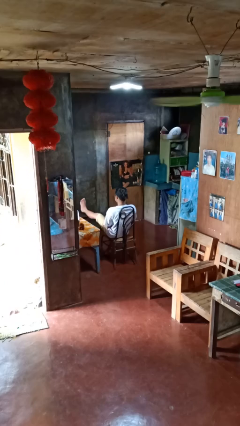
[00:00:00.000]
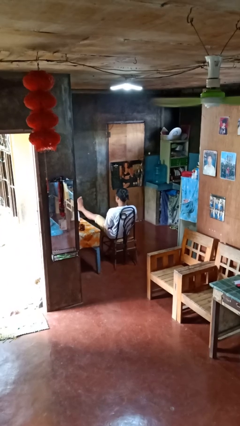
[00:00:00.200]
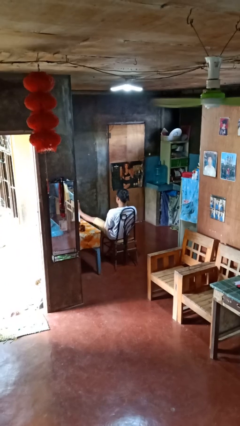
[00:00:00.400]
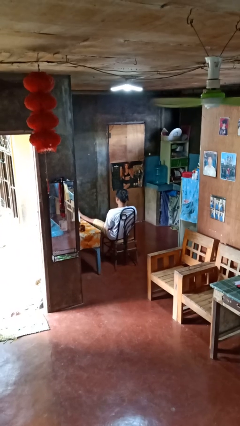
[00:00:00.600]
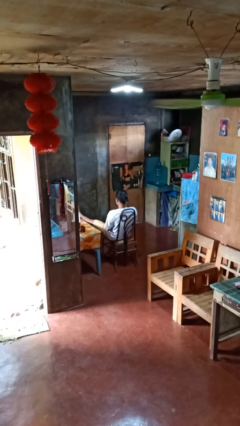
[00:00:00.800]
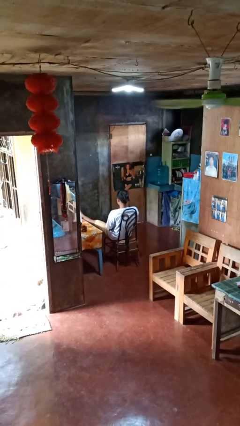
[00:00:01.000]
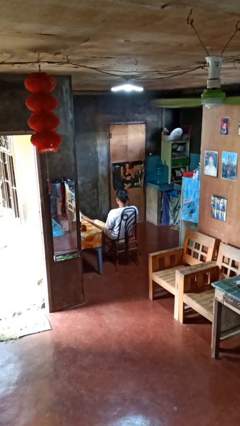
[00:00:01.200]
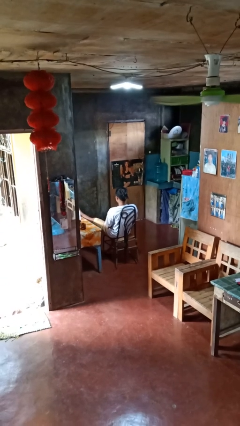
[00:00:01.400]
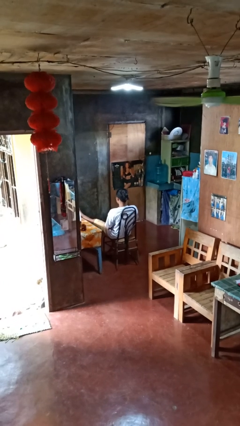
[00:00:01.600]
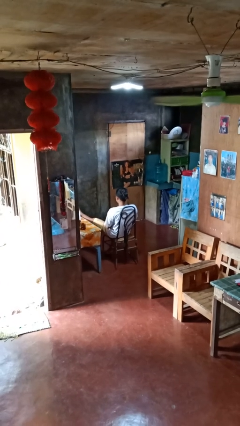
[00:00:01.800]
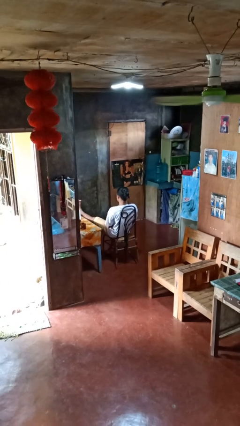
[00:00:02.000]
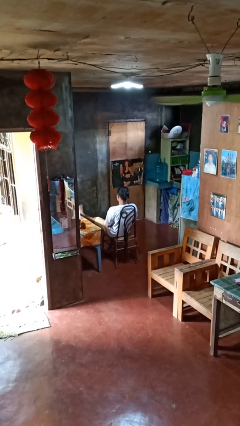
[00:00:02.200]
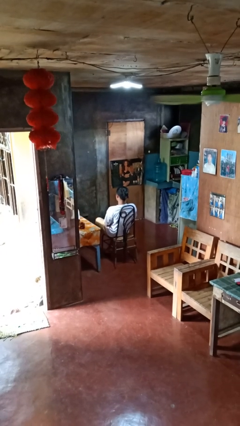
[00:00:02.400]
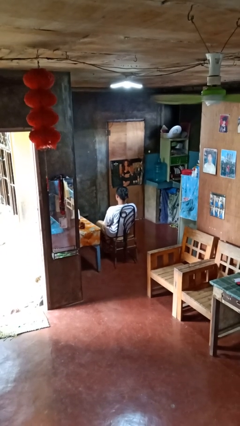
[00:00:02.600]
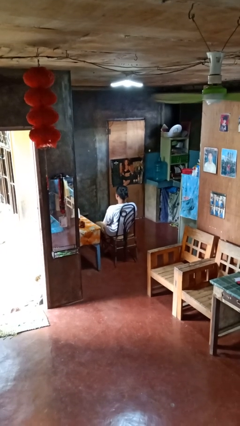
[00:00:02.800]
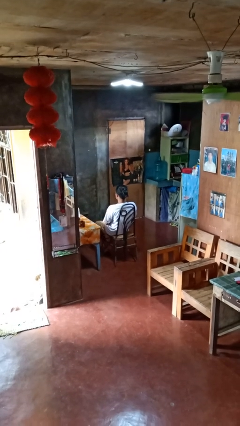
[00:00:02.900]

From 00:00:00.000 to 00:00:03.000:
person puts feet up

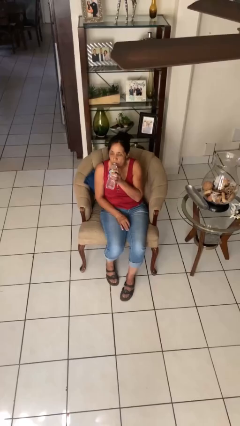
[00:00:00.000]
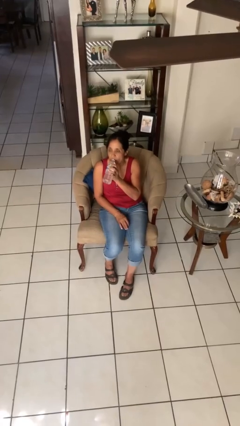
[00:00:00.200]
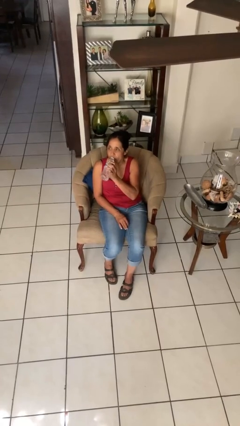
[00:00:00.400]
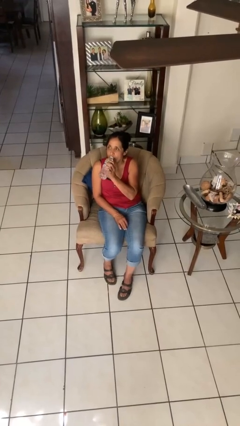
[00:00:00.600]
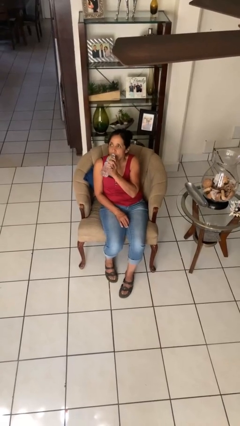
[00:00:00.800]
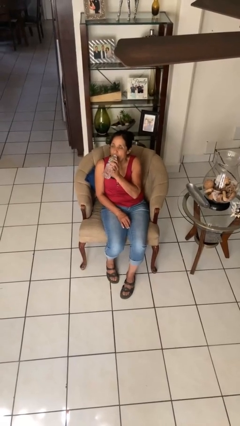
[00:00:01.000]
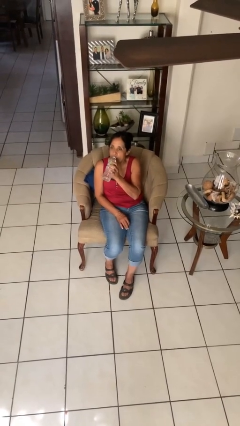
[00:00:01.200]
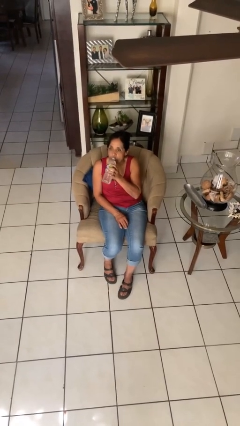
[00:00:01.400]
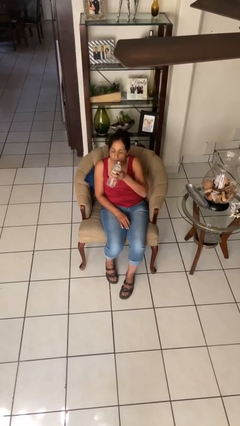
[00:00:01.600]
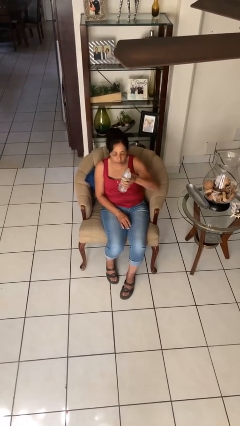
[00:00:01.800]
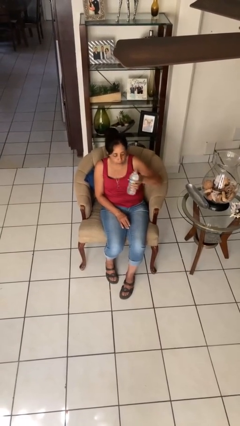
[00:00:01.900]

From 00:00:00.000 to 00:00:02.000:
person drinks from bottle

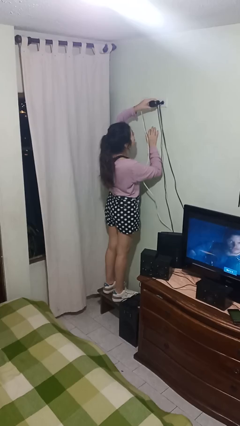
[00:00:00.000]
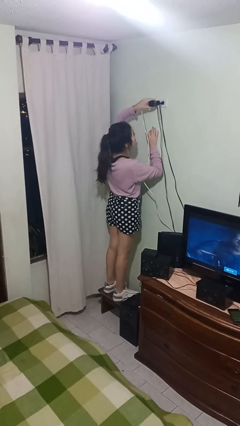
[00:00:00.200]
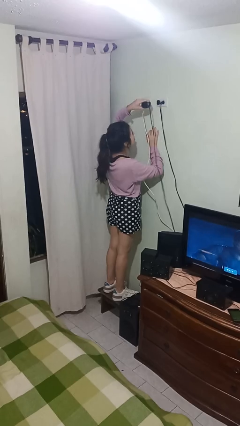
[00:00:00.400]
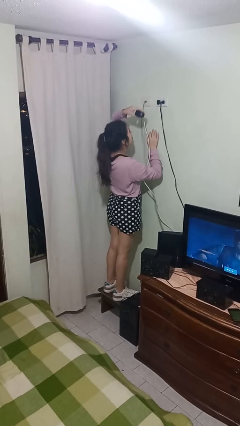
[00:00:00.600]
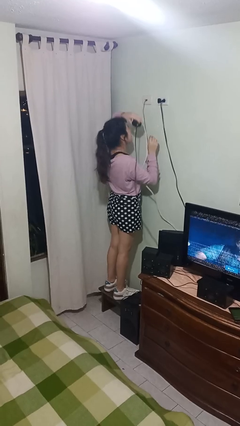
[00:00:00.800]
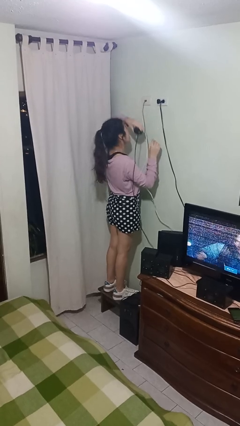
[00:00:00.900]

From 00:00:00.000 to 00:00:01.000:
person unplugs from electrical socket

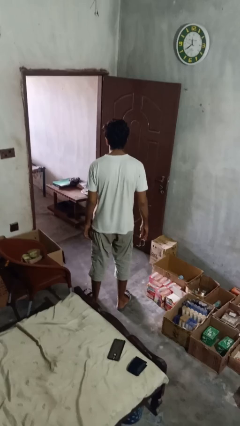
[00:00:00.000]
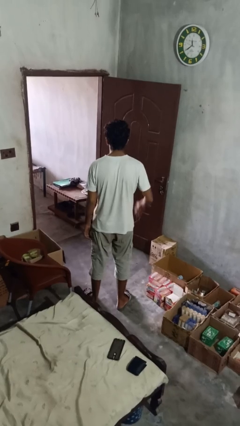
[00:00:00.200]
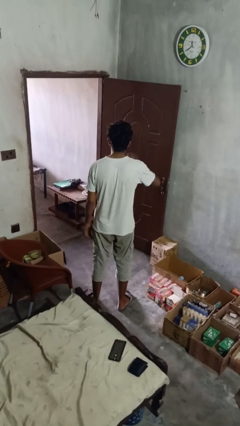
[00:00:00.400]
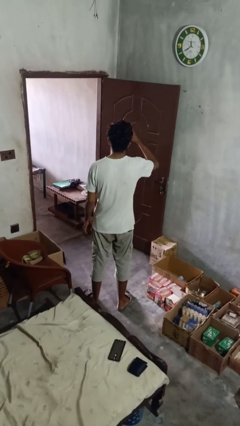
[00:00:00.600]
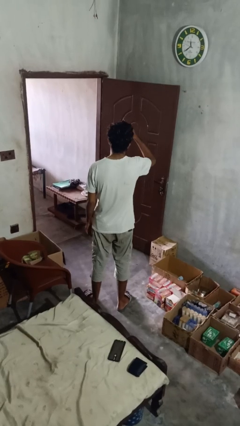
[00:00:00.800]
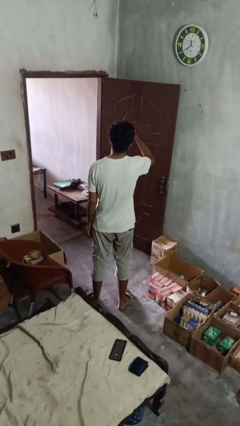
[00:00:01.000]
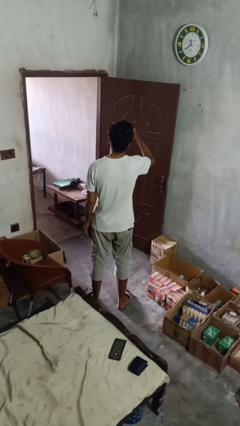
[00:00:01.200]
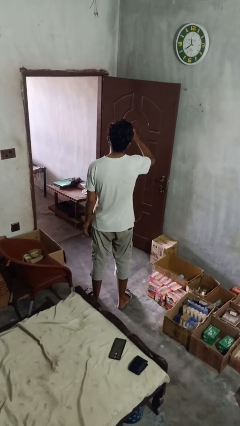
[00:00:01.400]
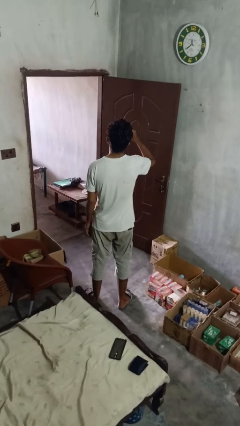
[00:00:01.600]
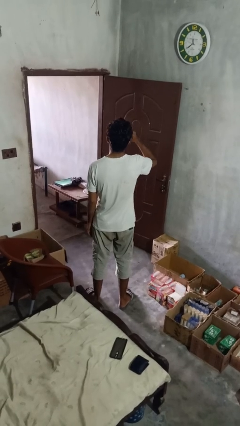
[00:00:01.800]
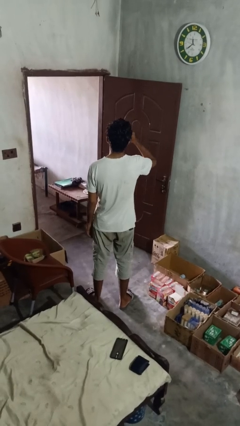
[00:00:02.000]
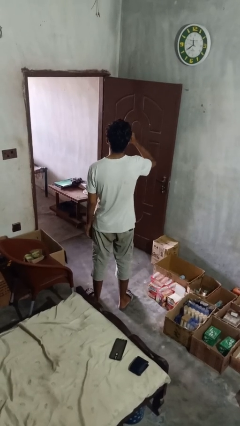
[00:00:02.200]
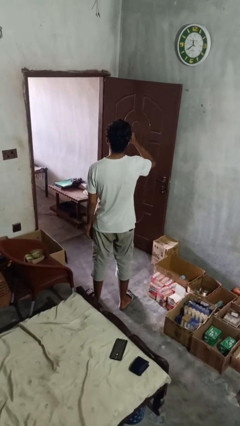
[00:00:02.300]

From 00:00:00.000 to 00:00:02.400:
person puts on glasses

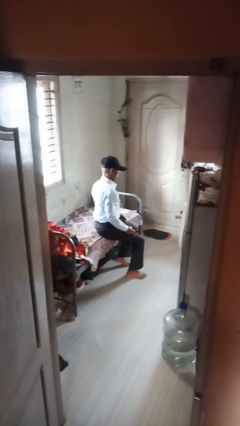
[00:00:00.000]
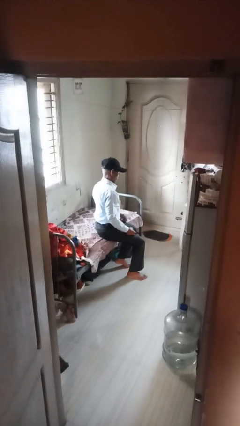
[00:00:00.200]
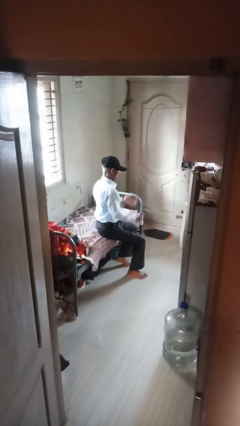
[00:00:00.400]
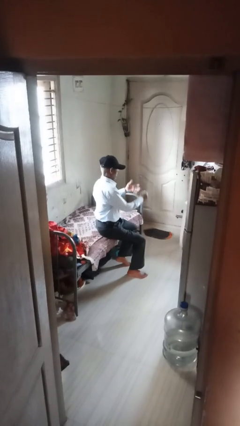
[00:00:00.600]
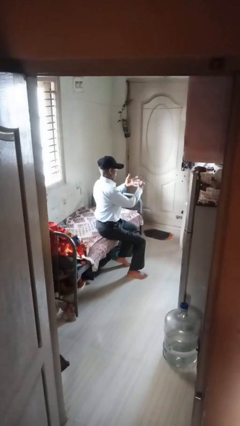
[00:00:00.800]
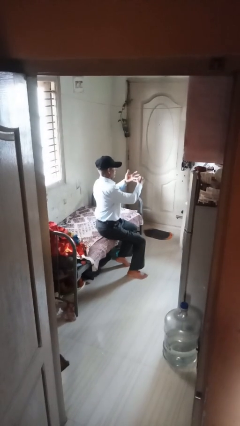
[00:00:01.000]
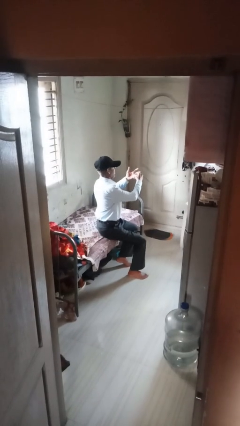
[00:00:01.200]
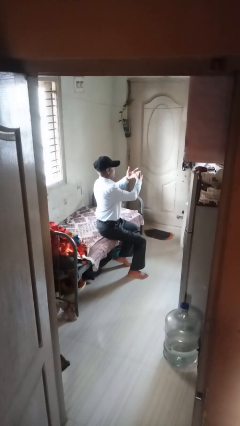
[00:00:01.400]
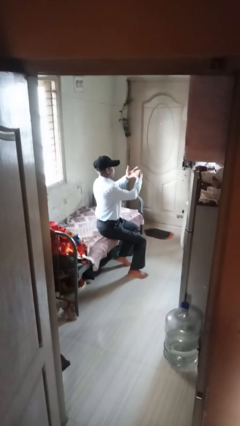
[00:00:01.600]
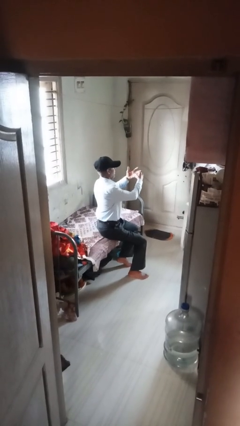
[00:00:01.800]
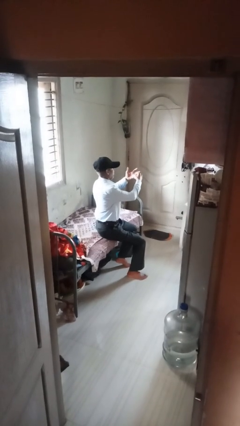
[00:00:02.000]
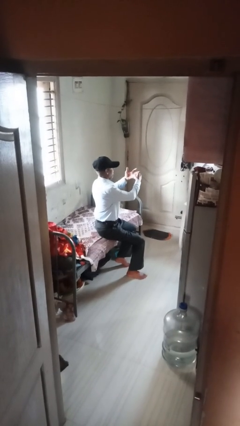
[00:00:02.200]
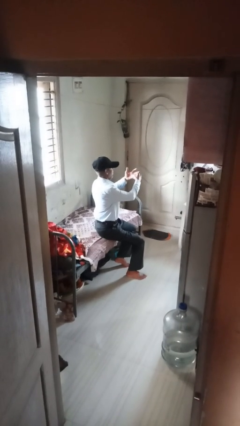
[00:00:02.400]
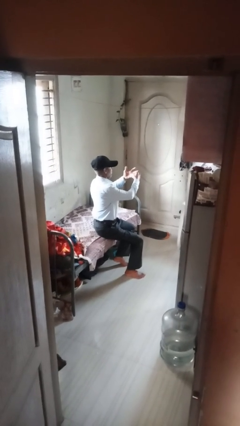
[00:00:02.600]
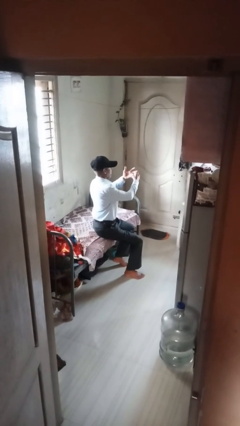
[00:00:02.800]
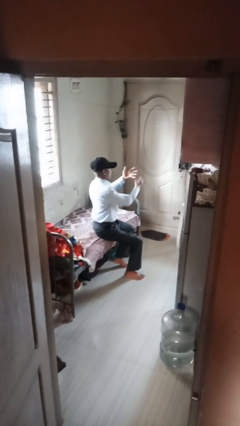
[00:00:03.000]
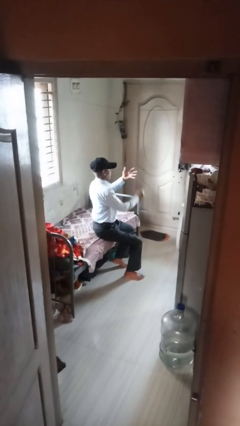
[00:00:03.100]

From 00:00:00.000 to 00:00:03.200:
person puts on ring

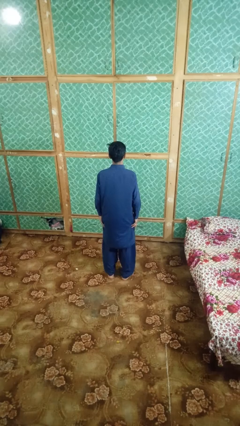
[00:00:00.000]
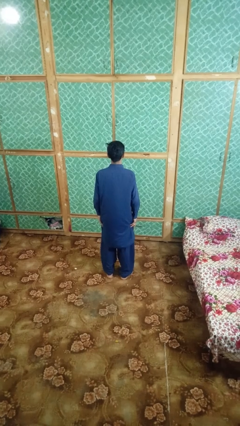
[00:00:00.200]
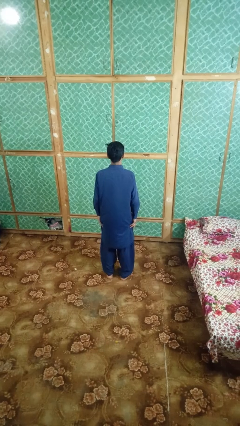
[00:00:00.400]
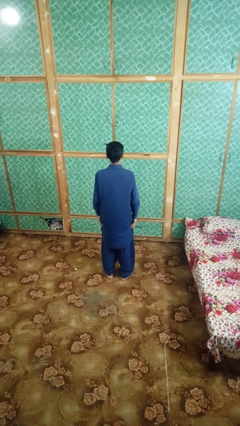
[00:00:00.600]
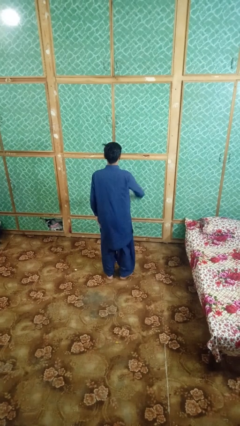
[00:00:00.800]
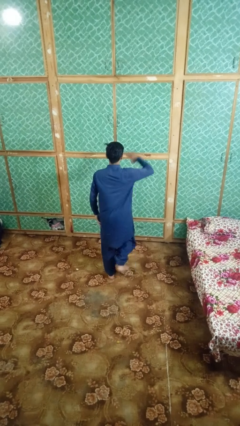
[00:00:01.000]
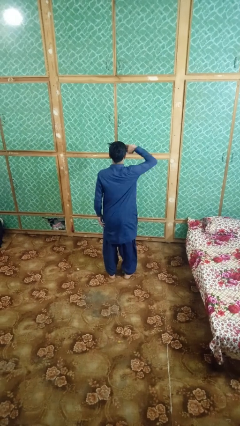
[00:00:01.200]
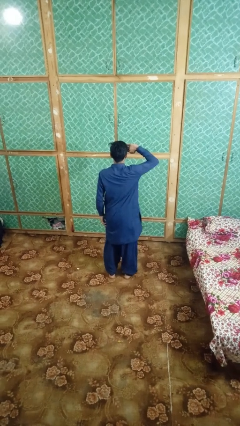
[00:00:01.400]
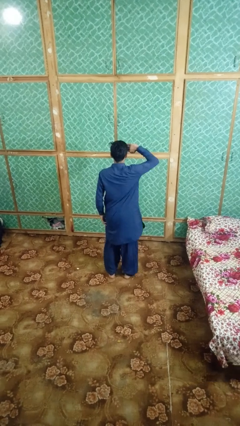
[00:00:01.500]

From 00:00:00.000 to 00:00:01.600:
person salutes

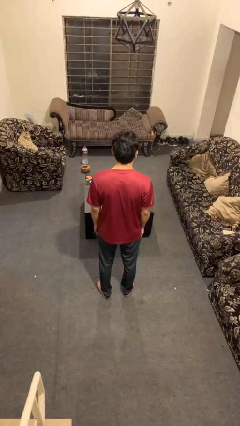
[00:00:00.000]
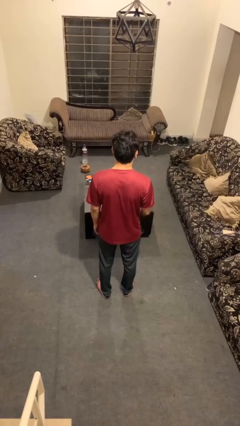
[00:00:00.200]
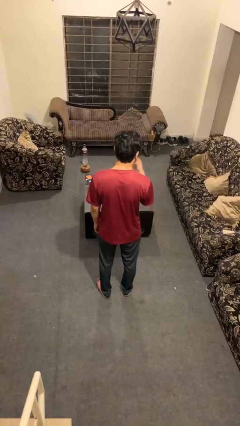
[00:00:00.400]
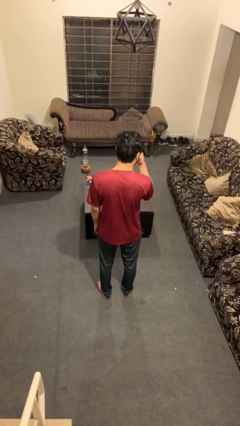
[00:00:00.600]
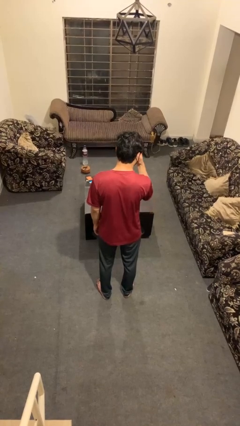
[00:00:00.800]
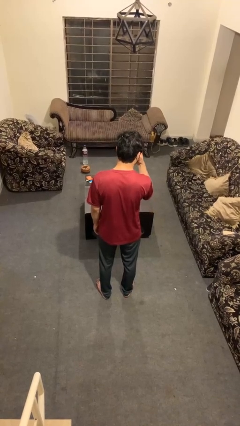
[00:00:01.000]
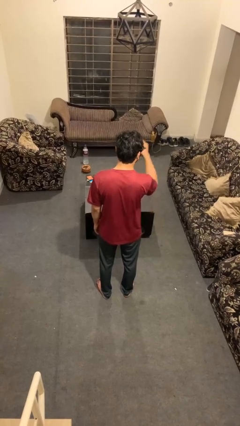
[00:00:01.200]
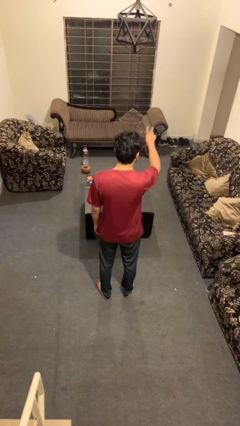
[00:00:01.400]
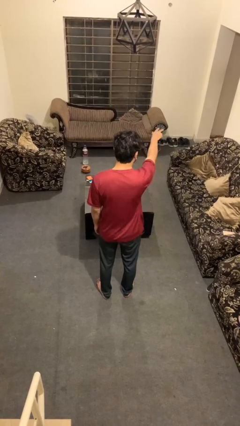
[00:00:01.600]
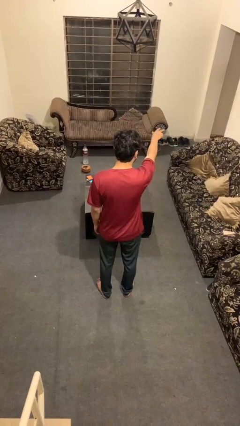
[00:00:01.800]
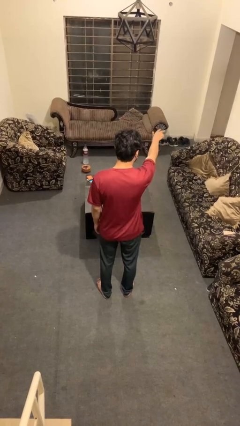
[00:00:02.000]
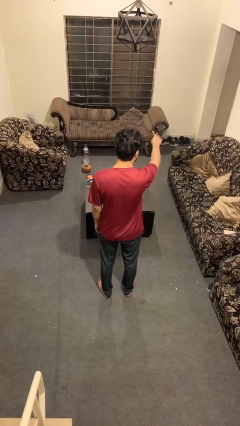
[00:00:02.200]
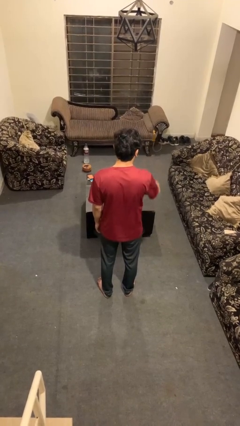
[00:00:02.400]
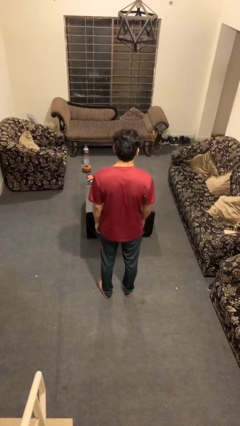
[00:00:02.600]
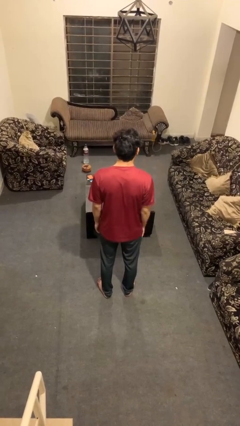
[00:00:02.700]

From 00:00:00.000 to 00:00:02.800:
person gestures watch closely

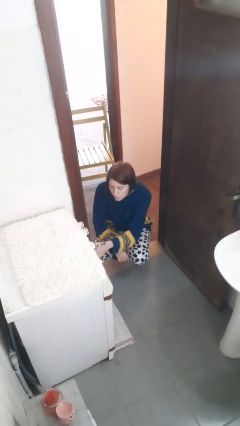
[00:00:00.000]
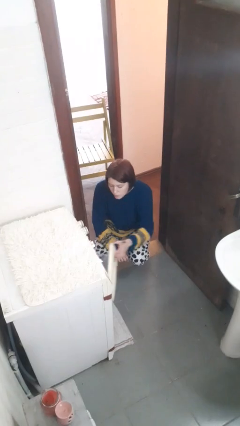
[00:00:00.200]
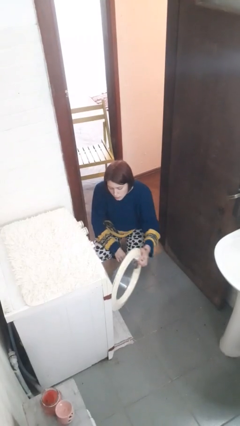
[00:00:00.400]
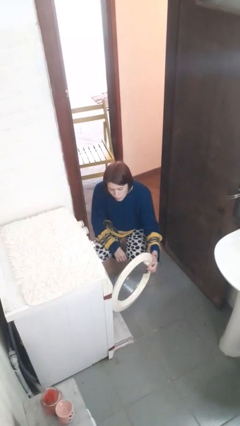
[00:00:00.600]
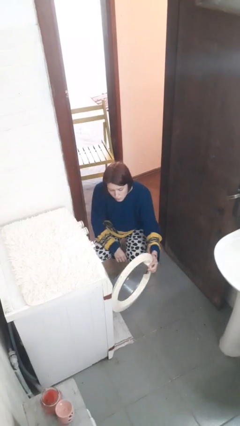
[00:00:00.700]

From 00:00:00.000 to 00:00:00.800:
person opens clothes washer
